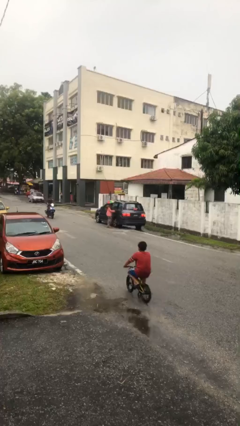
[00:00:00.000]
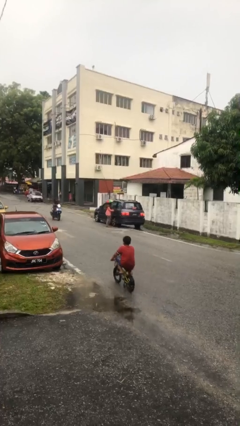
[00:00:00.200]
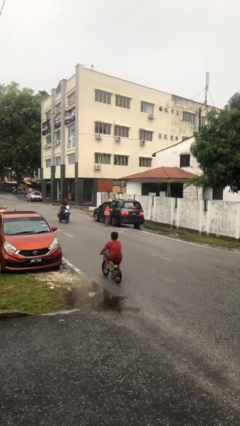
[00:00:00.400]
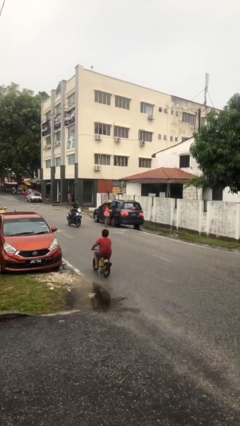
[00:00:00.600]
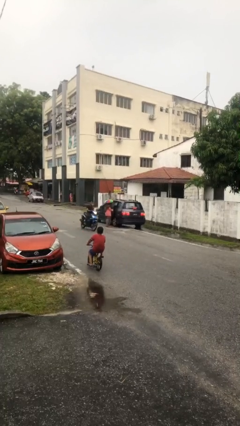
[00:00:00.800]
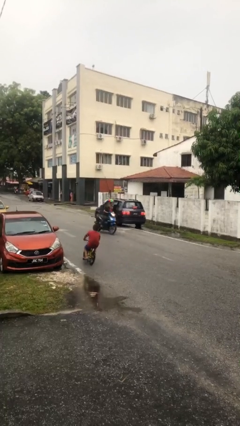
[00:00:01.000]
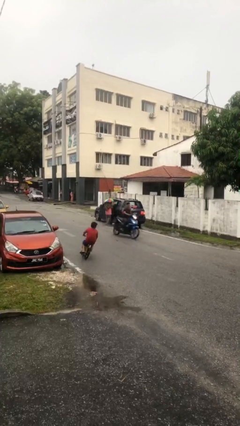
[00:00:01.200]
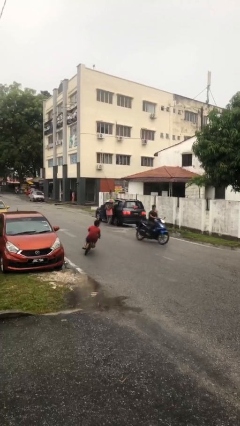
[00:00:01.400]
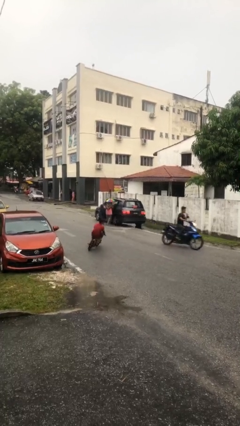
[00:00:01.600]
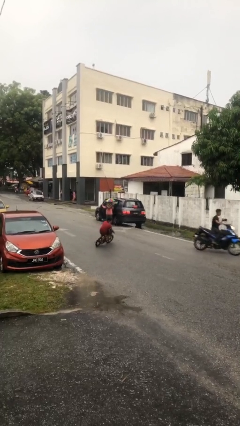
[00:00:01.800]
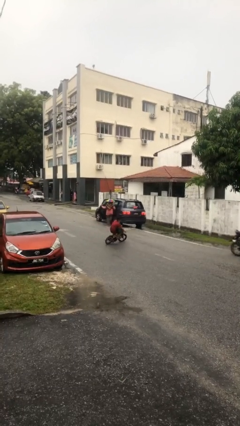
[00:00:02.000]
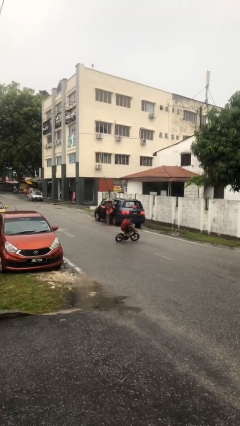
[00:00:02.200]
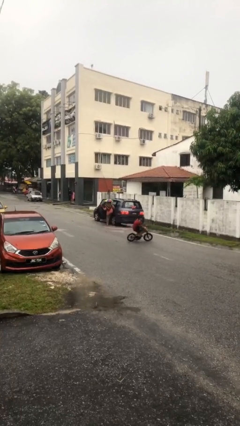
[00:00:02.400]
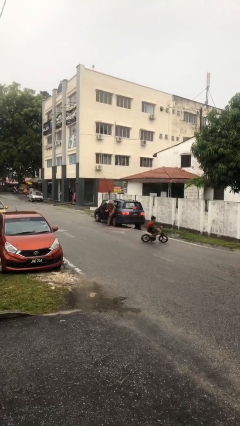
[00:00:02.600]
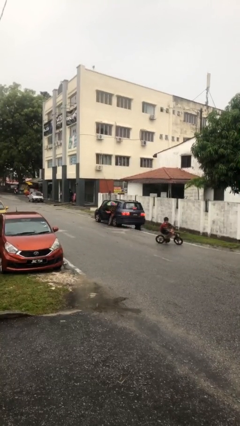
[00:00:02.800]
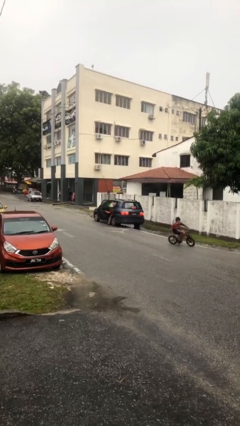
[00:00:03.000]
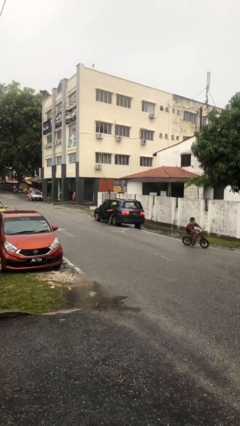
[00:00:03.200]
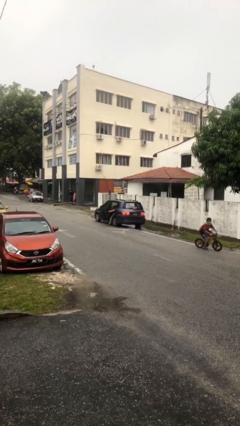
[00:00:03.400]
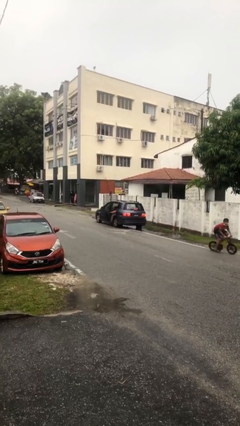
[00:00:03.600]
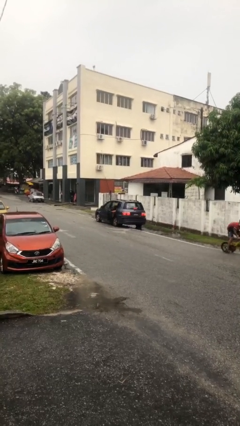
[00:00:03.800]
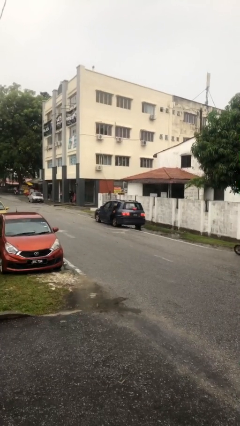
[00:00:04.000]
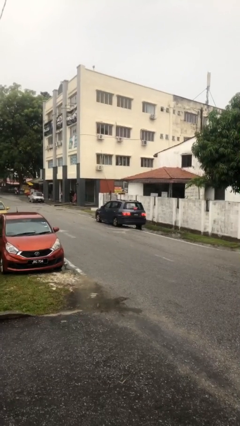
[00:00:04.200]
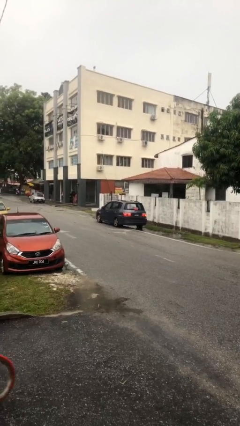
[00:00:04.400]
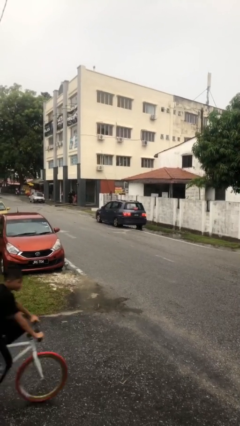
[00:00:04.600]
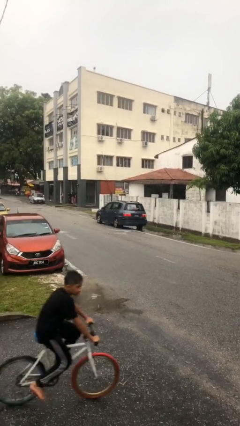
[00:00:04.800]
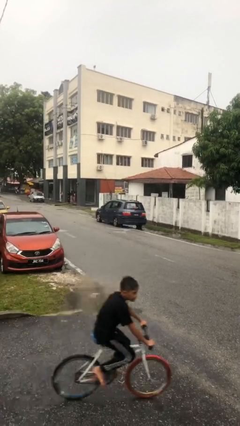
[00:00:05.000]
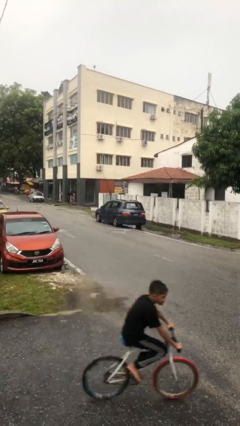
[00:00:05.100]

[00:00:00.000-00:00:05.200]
car picks up person

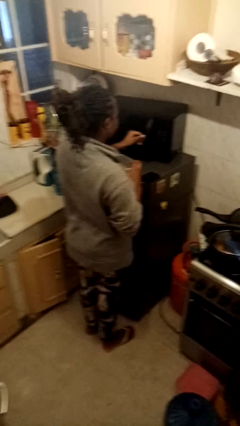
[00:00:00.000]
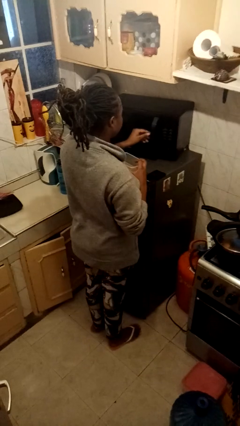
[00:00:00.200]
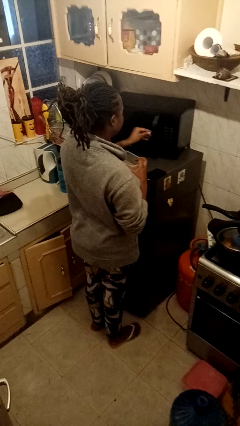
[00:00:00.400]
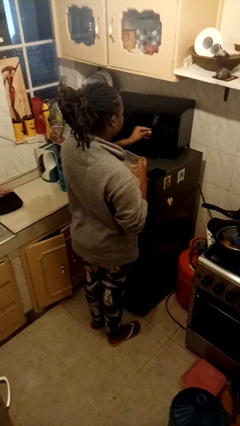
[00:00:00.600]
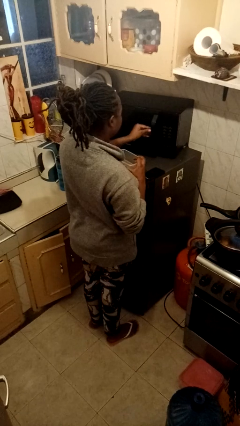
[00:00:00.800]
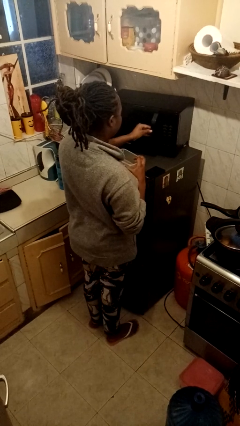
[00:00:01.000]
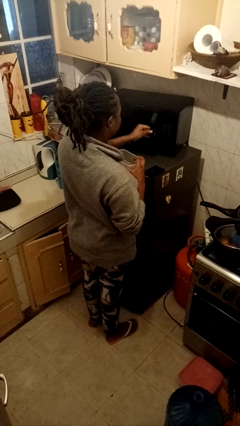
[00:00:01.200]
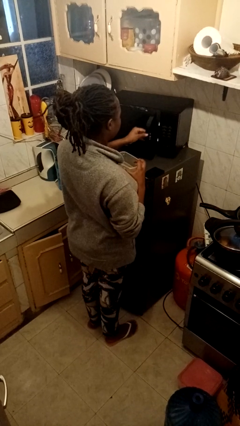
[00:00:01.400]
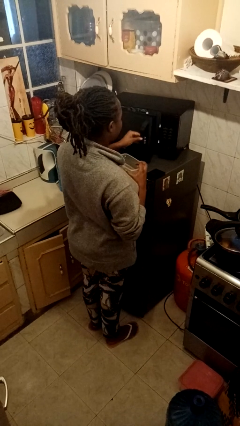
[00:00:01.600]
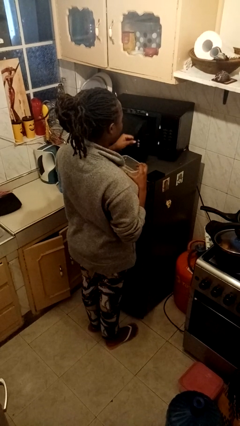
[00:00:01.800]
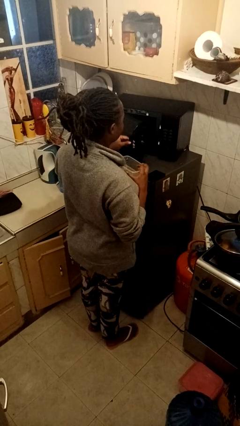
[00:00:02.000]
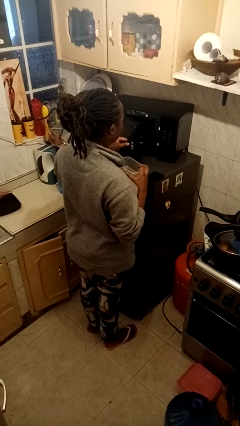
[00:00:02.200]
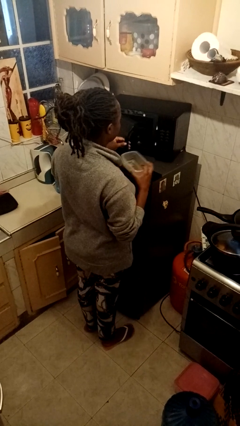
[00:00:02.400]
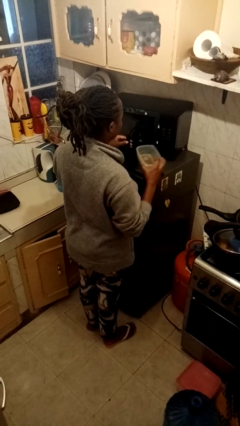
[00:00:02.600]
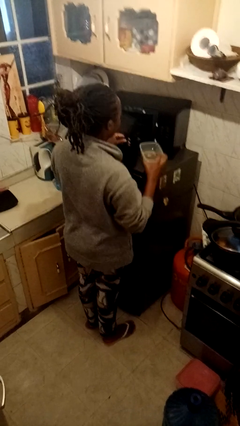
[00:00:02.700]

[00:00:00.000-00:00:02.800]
person opens microwave

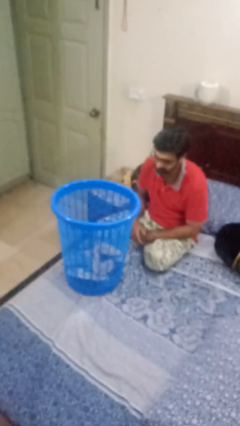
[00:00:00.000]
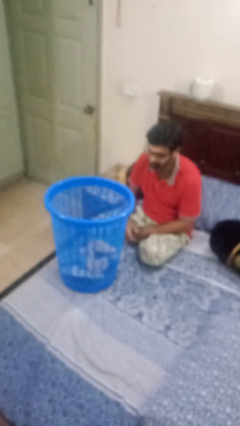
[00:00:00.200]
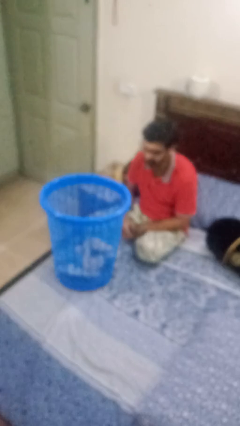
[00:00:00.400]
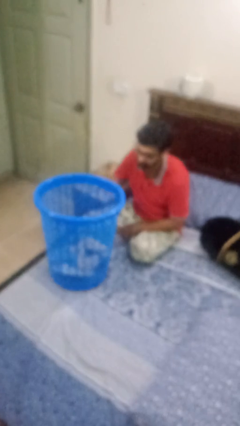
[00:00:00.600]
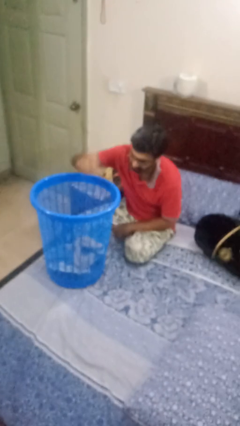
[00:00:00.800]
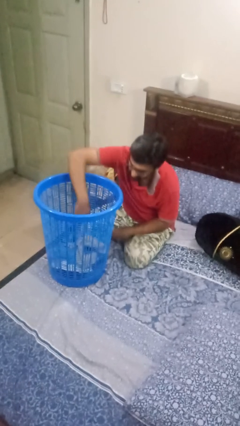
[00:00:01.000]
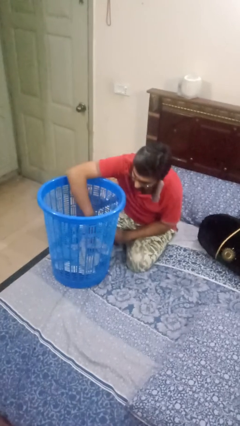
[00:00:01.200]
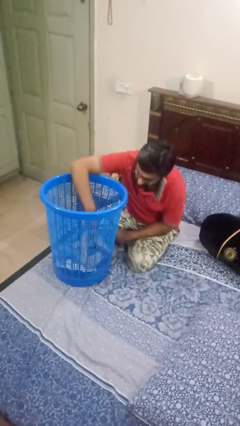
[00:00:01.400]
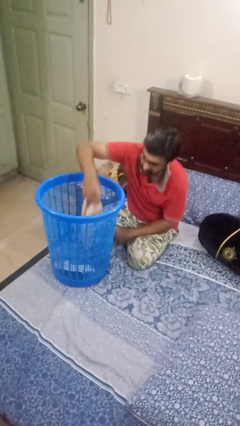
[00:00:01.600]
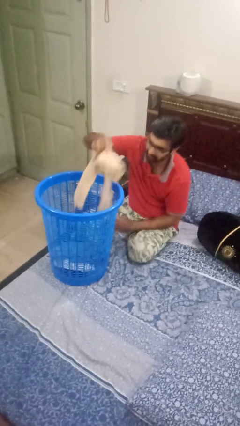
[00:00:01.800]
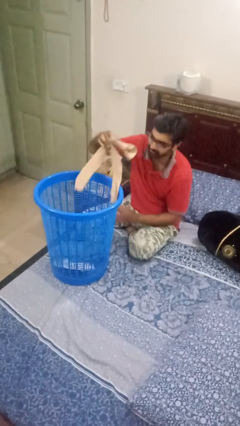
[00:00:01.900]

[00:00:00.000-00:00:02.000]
person takes object from basket

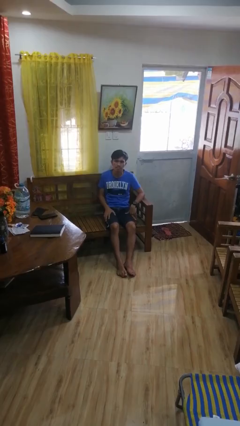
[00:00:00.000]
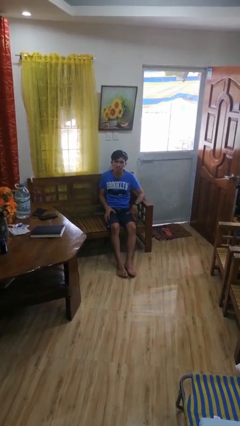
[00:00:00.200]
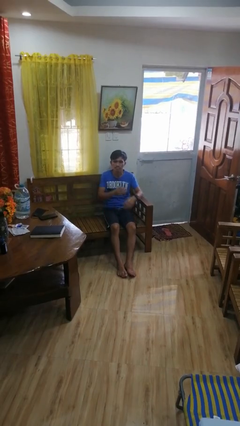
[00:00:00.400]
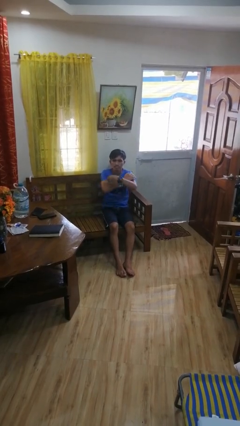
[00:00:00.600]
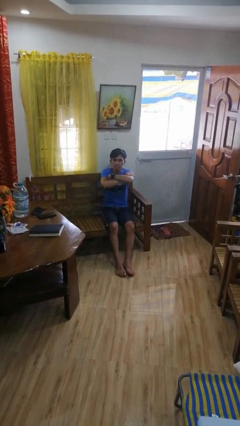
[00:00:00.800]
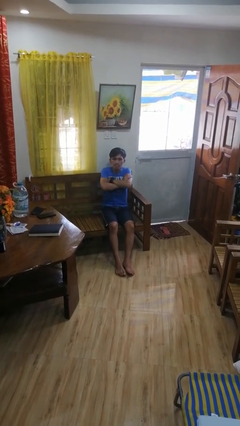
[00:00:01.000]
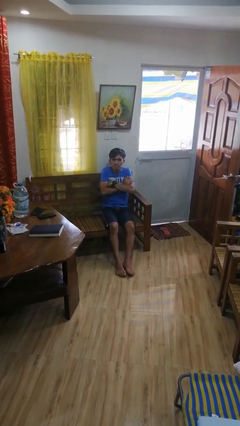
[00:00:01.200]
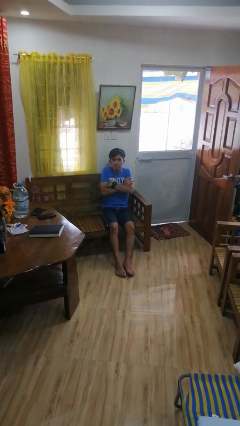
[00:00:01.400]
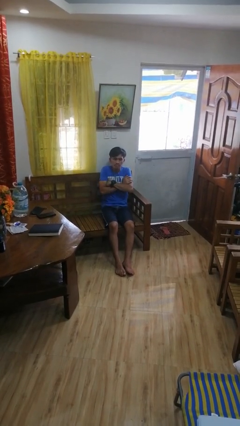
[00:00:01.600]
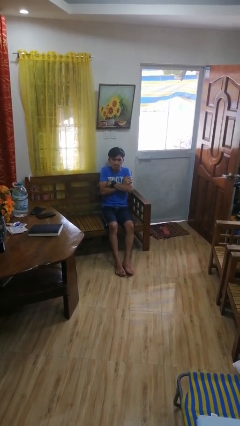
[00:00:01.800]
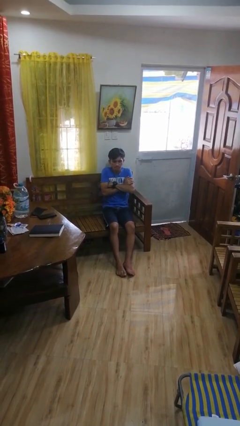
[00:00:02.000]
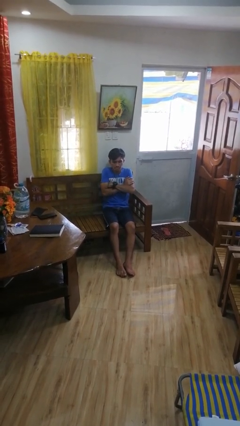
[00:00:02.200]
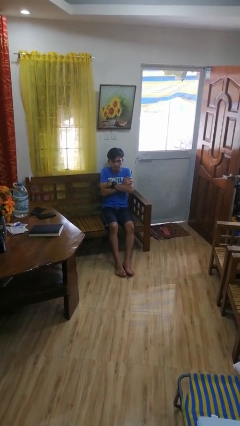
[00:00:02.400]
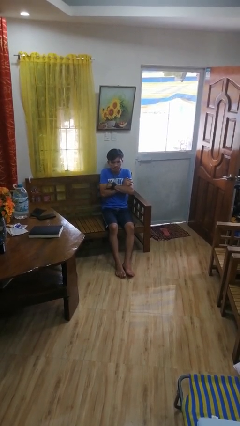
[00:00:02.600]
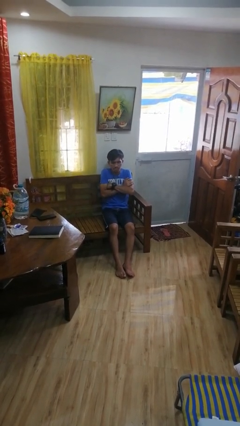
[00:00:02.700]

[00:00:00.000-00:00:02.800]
person crosses arms

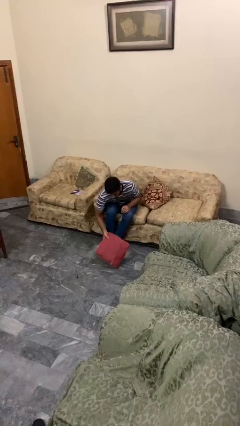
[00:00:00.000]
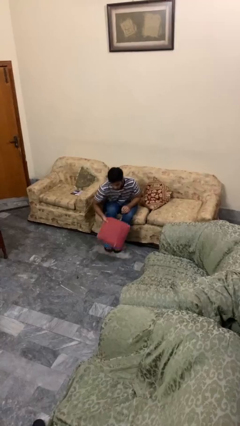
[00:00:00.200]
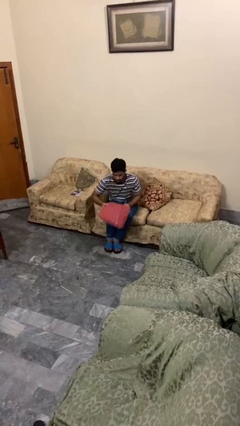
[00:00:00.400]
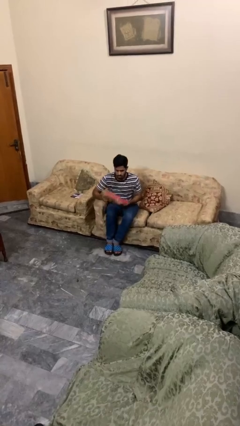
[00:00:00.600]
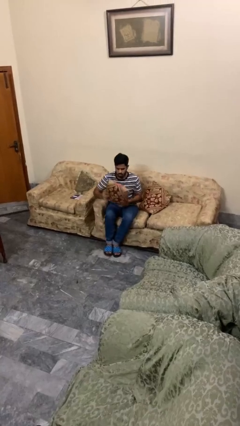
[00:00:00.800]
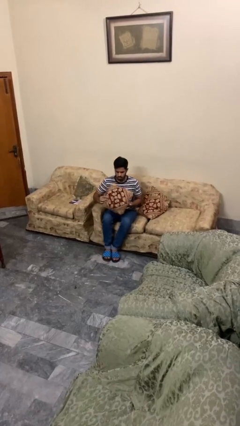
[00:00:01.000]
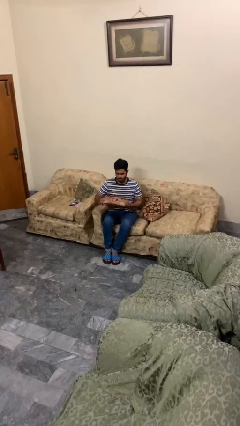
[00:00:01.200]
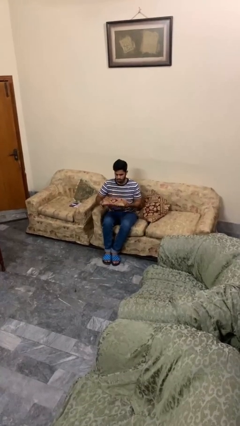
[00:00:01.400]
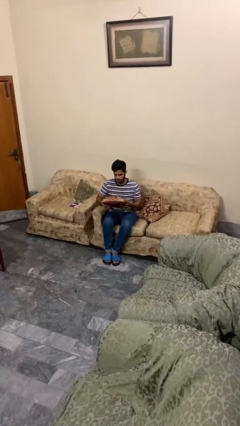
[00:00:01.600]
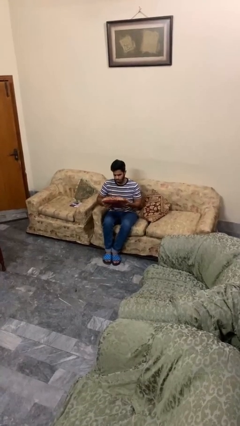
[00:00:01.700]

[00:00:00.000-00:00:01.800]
person picks up object from floor

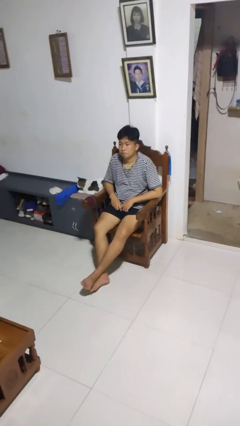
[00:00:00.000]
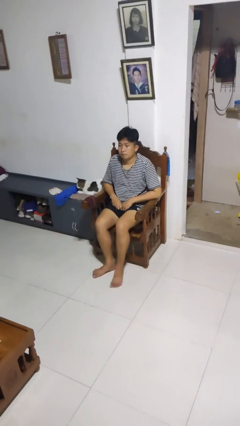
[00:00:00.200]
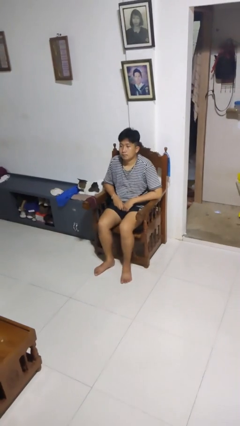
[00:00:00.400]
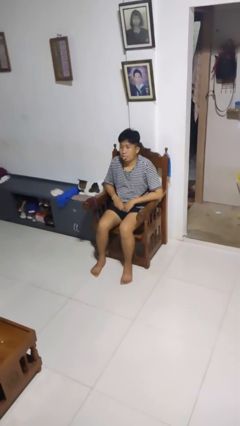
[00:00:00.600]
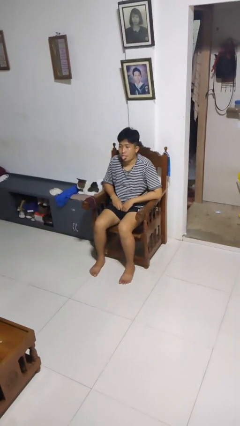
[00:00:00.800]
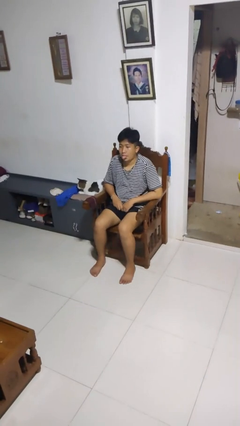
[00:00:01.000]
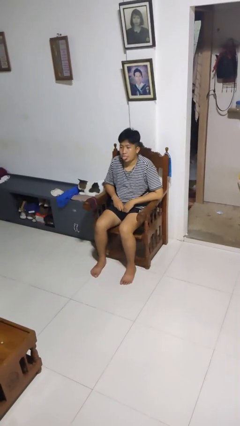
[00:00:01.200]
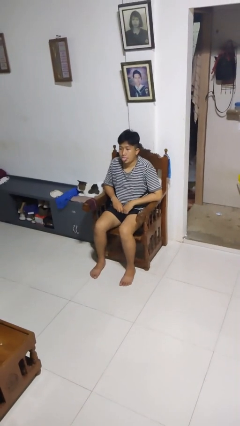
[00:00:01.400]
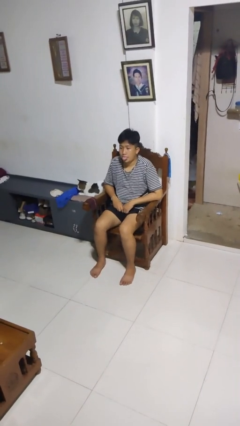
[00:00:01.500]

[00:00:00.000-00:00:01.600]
person sticks out tongue

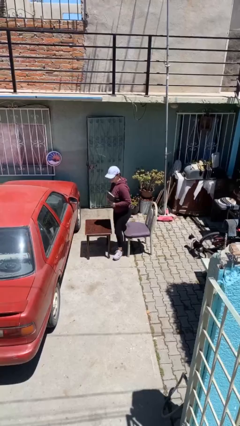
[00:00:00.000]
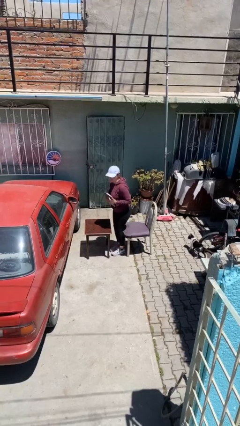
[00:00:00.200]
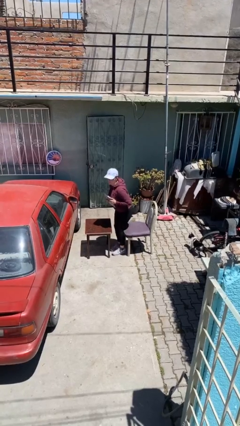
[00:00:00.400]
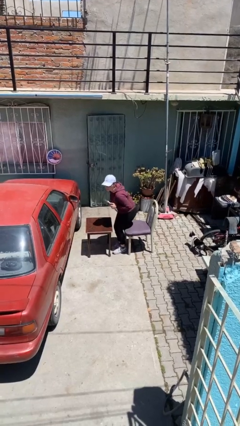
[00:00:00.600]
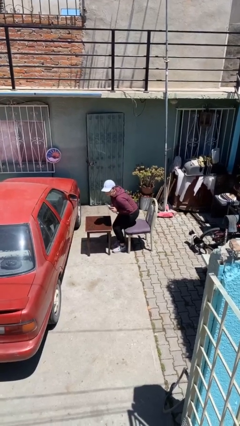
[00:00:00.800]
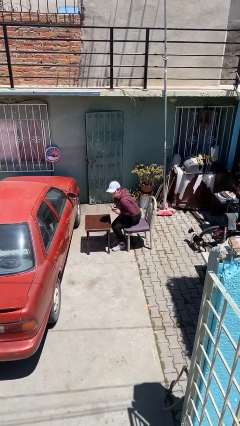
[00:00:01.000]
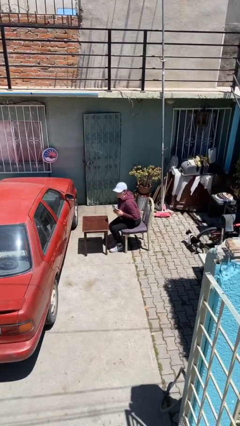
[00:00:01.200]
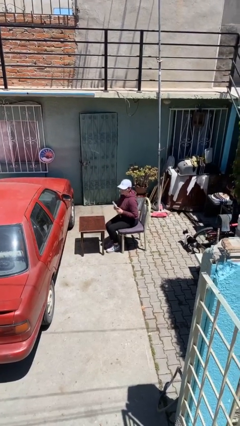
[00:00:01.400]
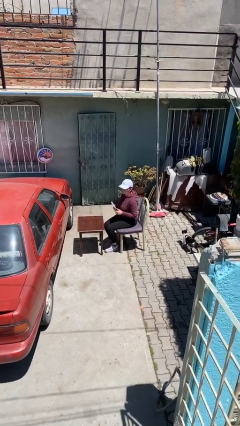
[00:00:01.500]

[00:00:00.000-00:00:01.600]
person sits down
